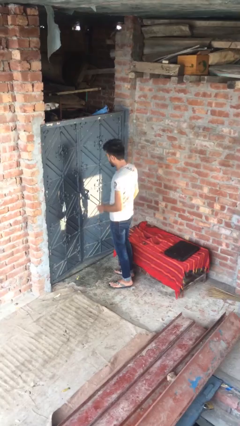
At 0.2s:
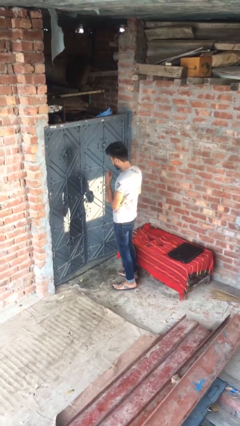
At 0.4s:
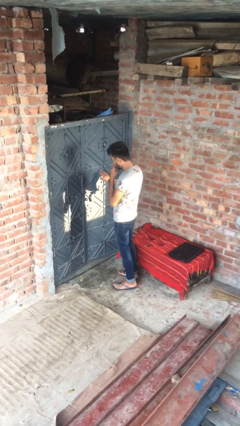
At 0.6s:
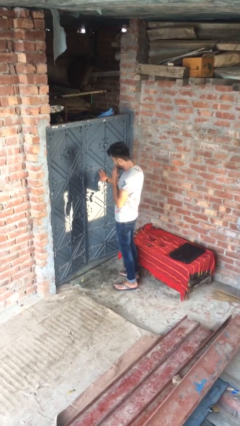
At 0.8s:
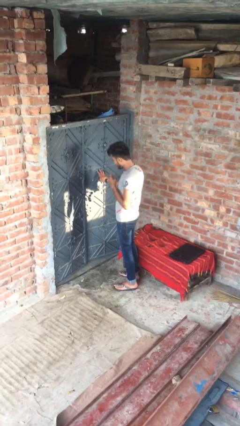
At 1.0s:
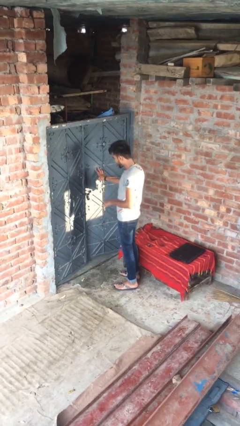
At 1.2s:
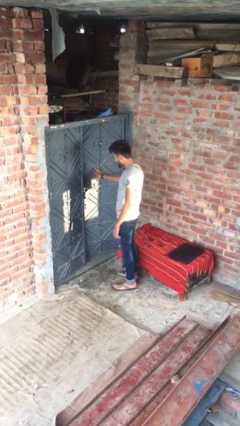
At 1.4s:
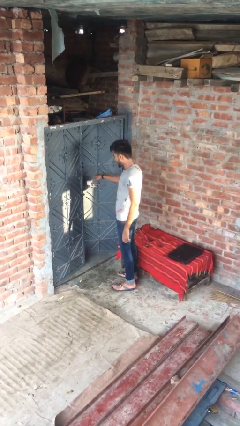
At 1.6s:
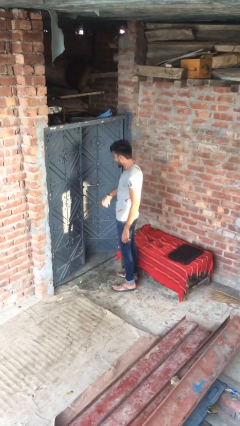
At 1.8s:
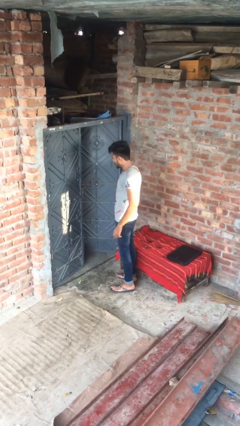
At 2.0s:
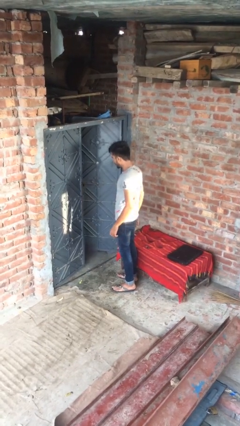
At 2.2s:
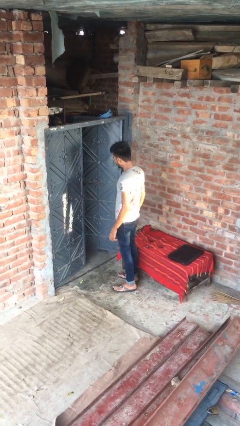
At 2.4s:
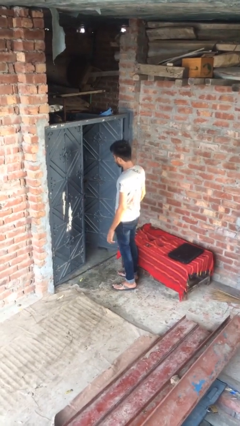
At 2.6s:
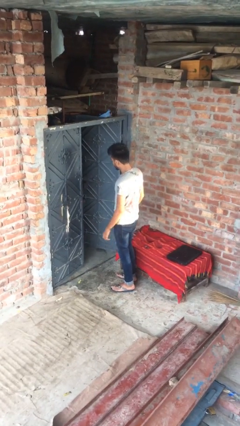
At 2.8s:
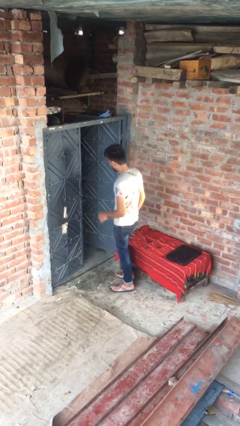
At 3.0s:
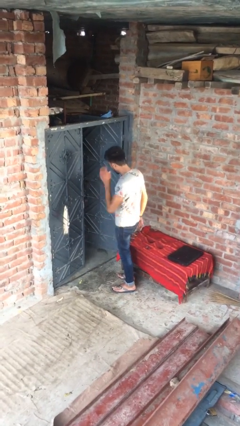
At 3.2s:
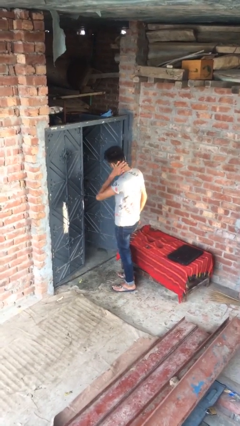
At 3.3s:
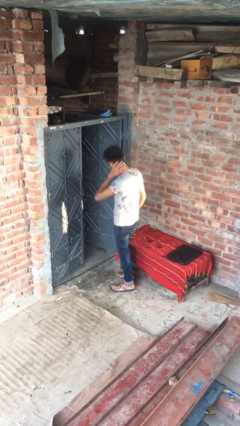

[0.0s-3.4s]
person opens facility door

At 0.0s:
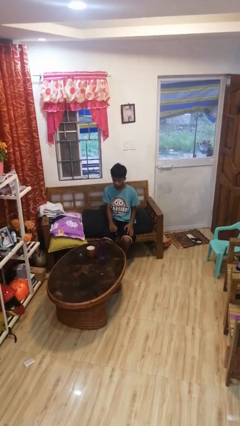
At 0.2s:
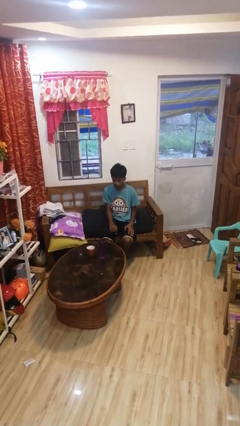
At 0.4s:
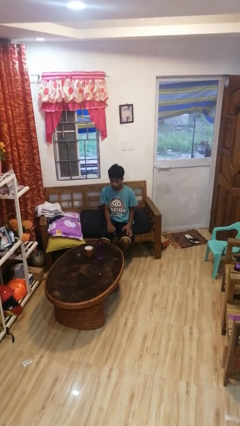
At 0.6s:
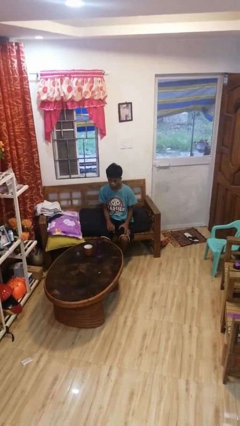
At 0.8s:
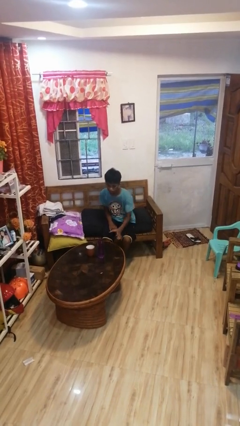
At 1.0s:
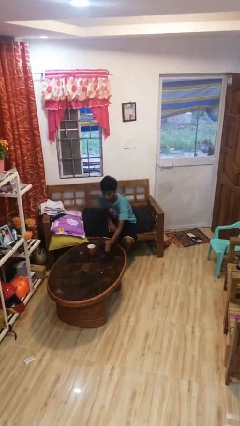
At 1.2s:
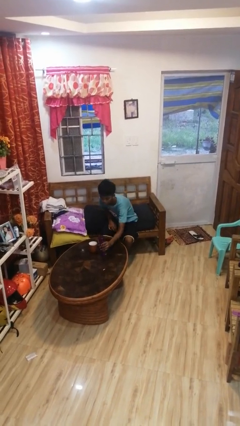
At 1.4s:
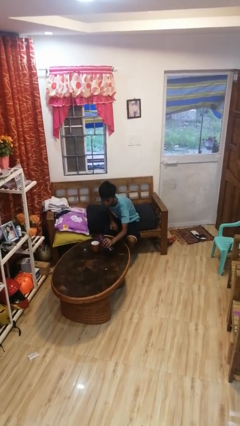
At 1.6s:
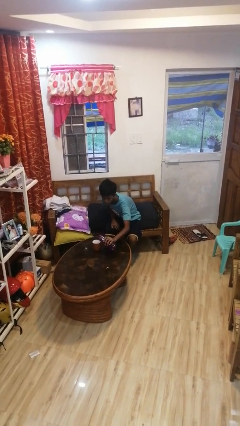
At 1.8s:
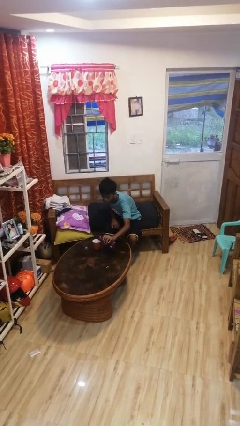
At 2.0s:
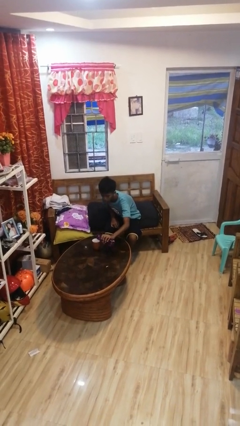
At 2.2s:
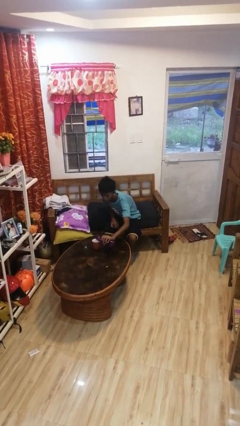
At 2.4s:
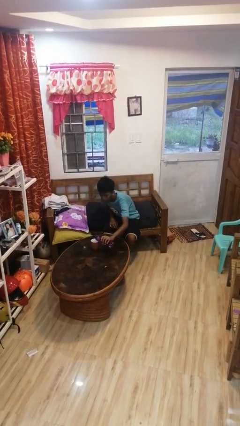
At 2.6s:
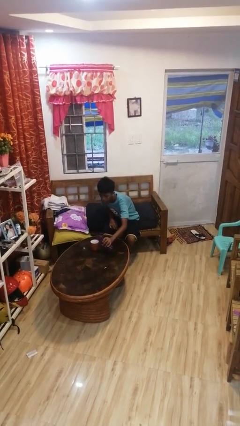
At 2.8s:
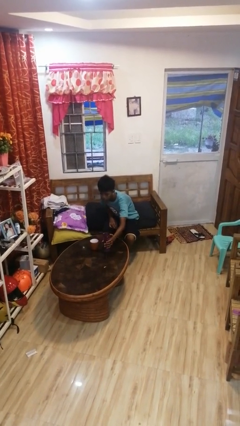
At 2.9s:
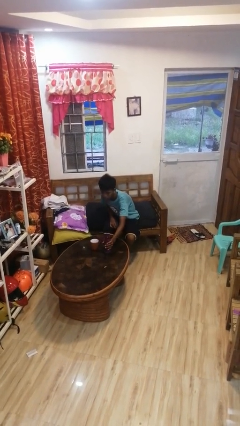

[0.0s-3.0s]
person pours liquid into cup

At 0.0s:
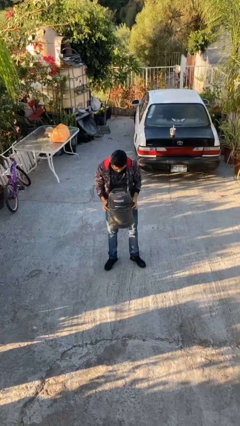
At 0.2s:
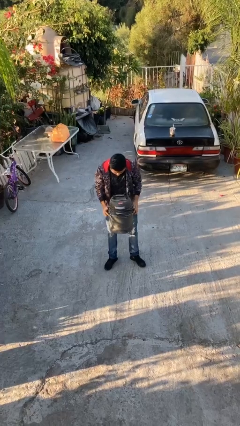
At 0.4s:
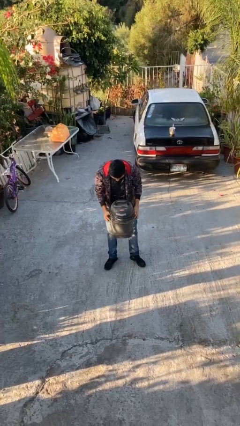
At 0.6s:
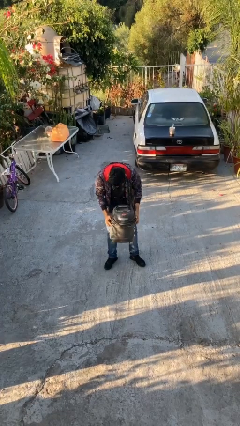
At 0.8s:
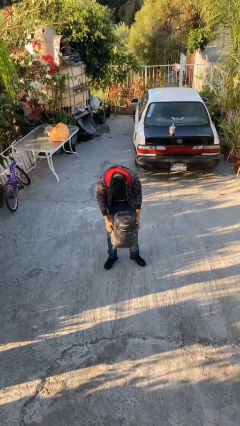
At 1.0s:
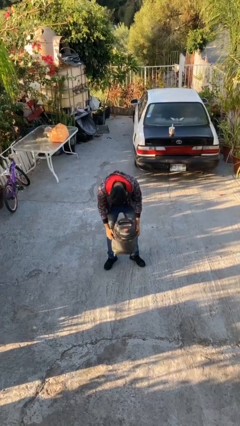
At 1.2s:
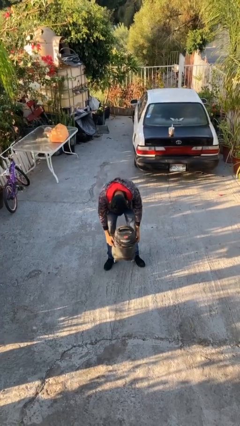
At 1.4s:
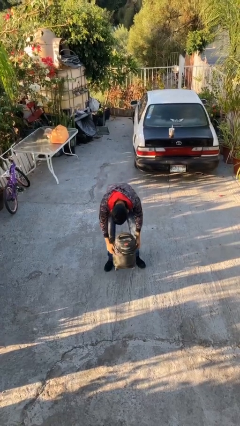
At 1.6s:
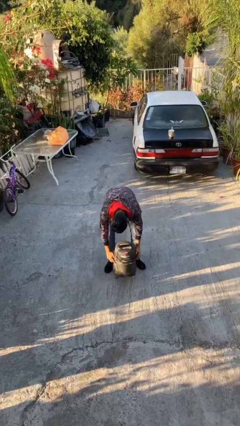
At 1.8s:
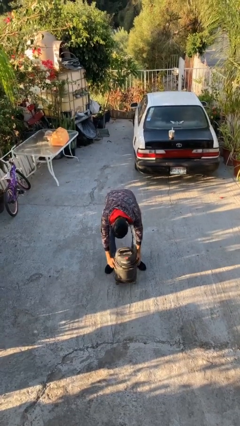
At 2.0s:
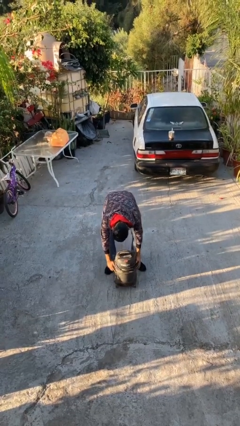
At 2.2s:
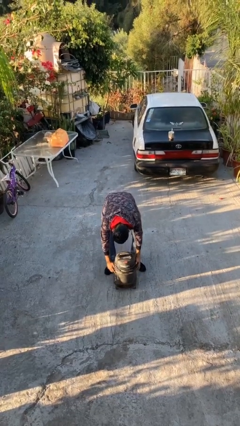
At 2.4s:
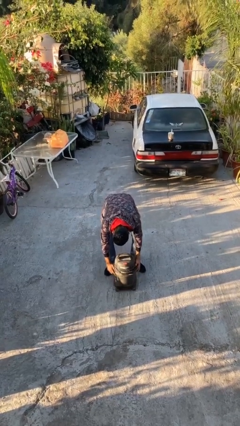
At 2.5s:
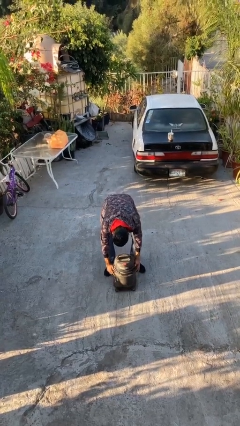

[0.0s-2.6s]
person puts down object on floor

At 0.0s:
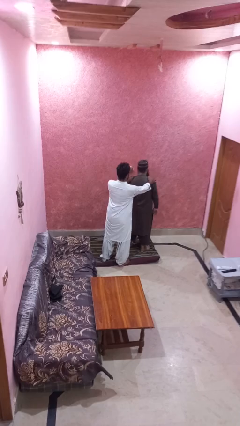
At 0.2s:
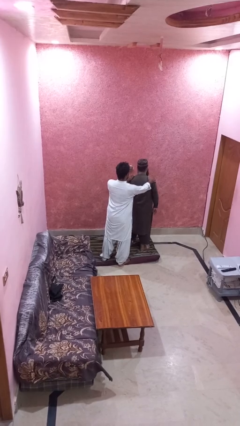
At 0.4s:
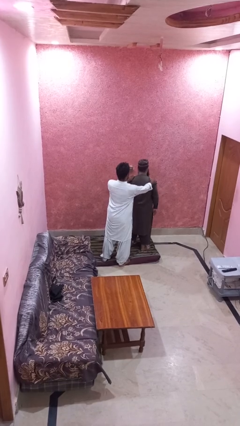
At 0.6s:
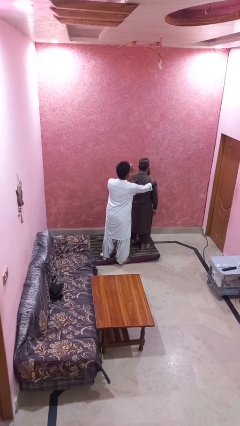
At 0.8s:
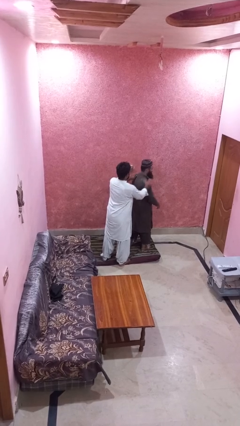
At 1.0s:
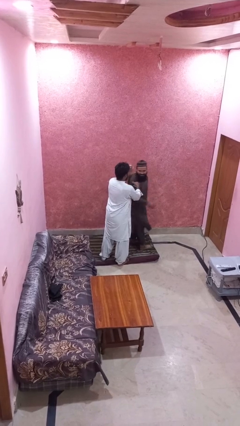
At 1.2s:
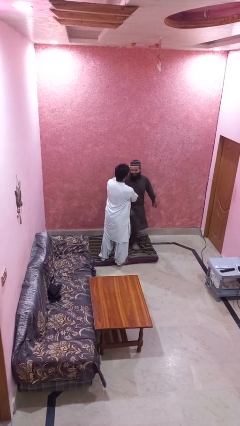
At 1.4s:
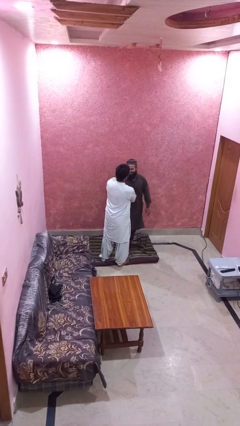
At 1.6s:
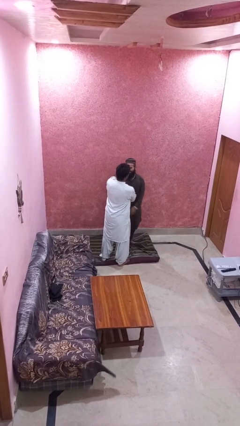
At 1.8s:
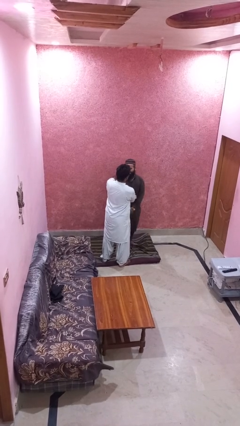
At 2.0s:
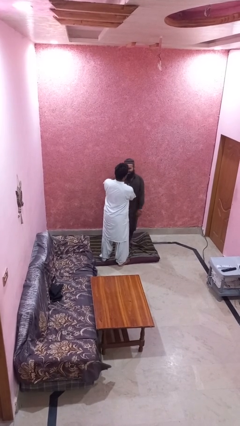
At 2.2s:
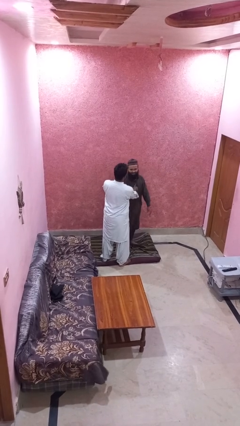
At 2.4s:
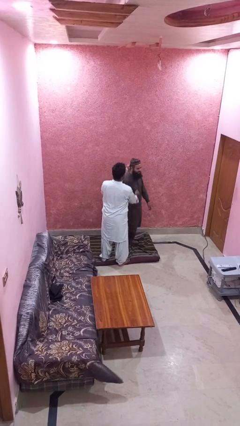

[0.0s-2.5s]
person spins person around

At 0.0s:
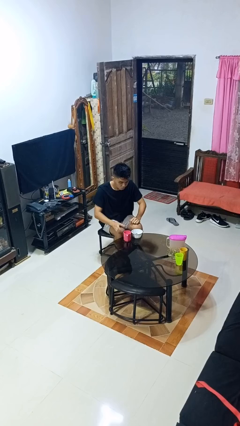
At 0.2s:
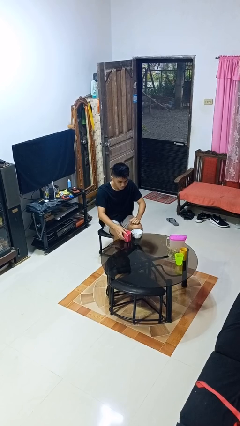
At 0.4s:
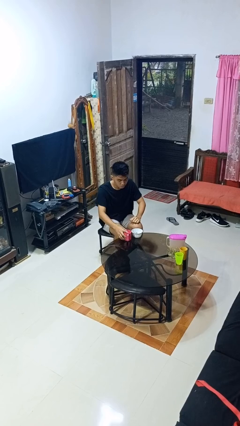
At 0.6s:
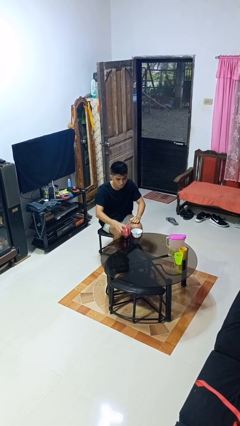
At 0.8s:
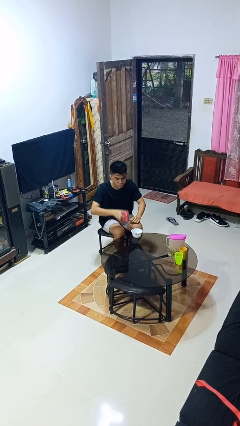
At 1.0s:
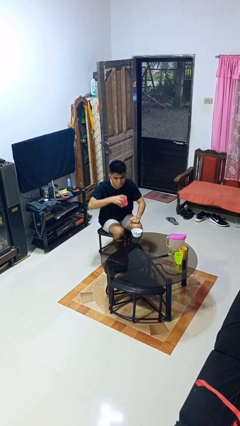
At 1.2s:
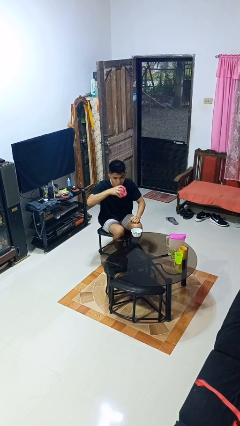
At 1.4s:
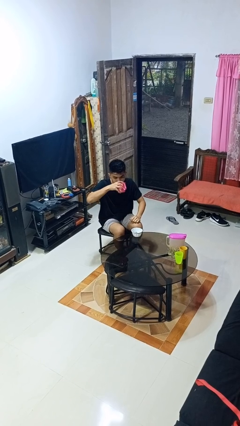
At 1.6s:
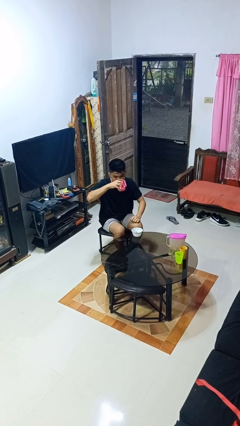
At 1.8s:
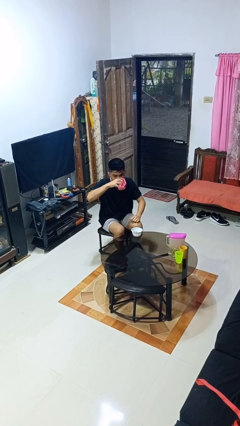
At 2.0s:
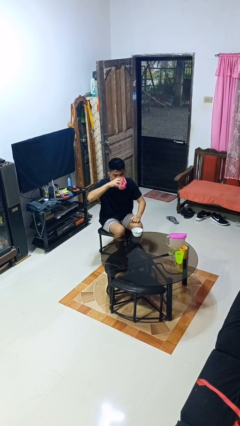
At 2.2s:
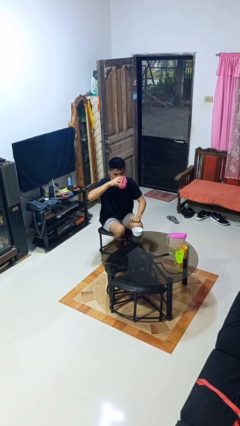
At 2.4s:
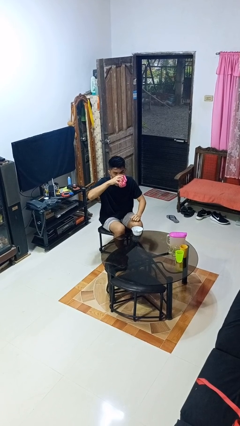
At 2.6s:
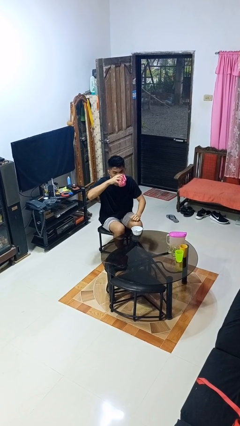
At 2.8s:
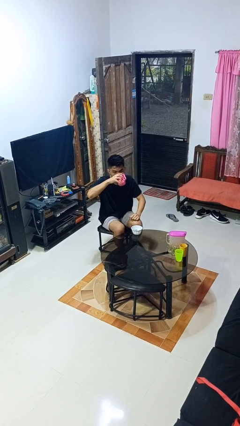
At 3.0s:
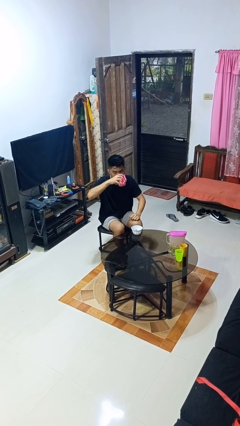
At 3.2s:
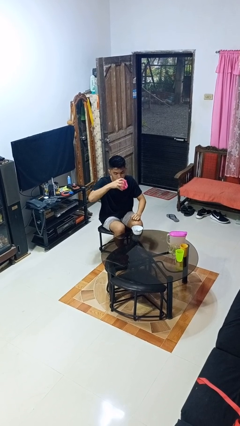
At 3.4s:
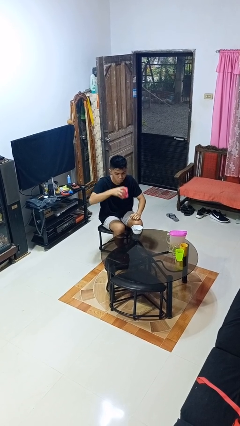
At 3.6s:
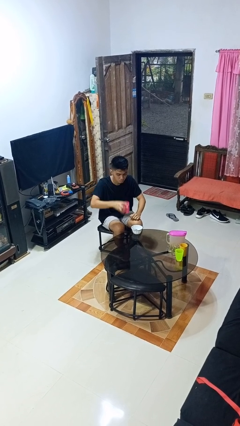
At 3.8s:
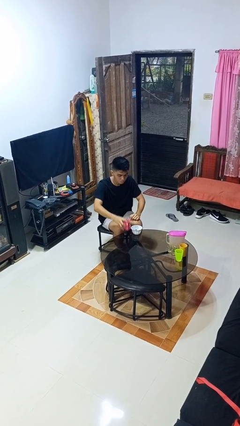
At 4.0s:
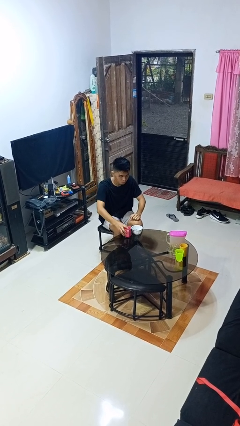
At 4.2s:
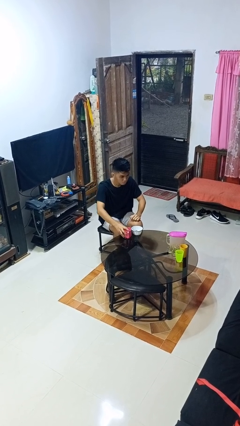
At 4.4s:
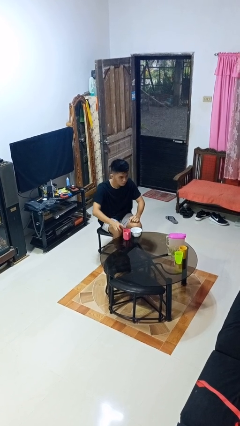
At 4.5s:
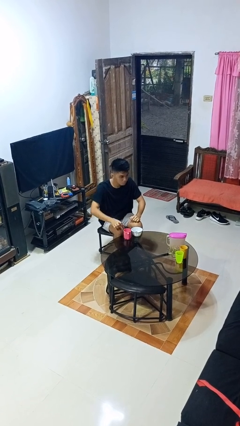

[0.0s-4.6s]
person drinks from cup

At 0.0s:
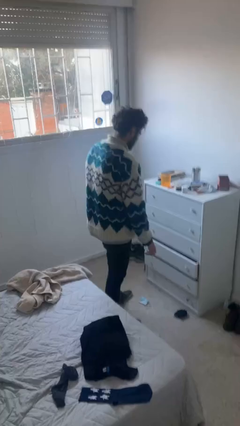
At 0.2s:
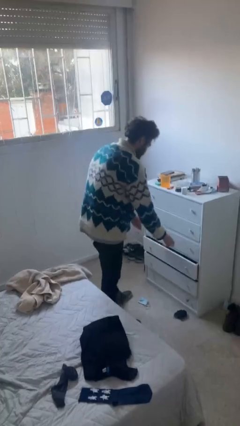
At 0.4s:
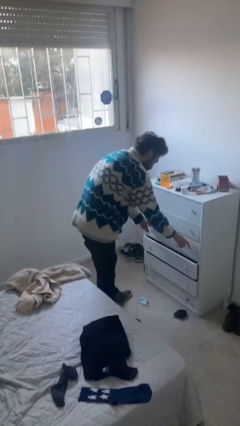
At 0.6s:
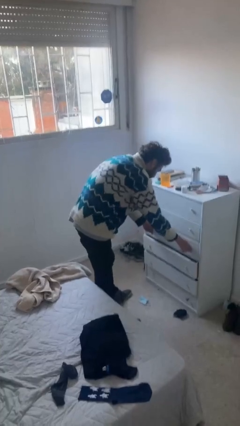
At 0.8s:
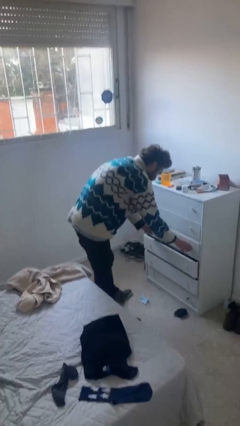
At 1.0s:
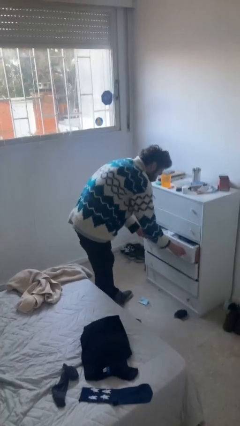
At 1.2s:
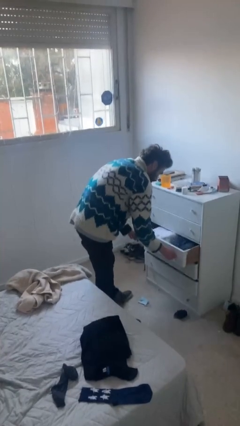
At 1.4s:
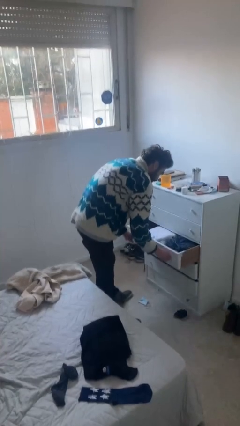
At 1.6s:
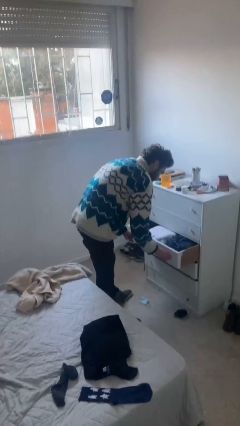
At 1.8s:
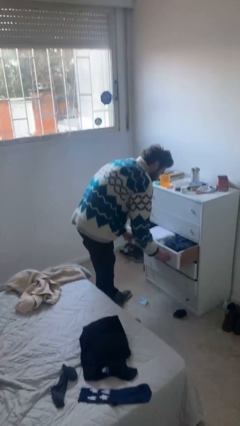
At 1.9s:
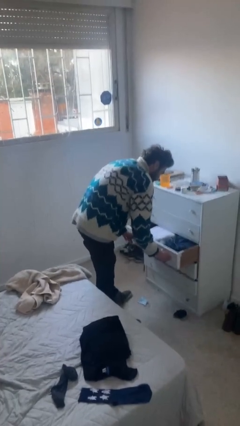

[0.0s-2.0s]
person opens dresser drawer
